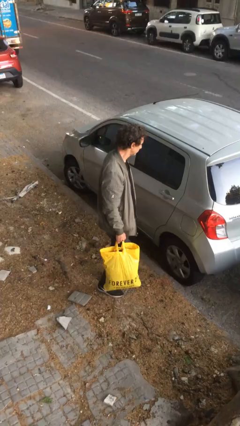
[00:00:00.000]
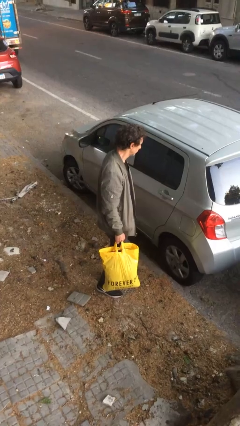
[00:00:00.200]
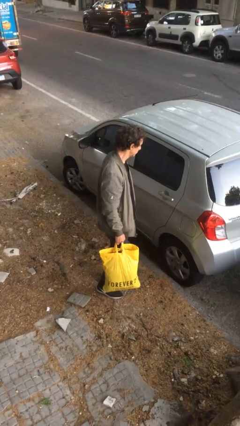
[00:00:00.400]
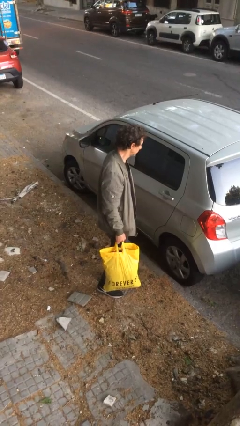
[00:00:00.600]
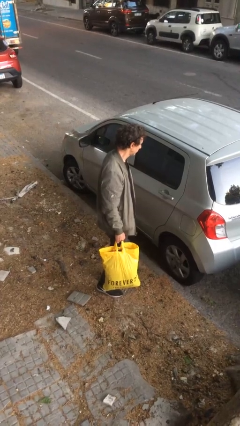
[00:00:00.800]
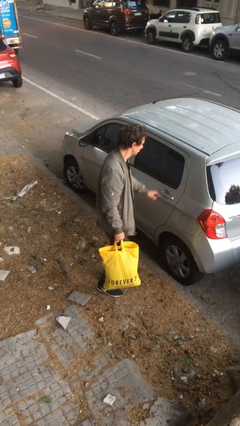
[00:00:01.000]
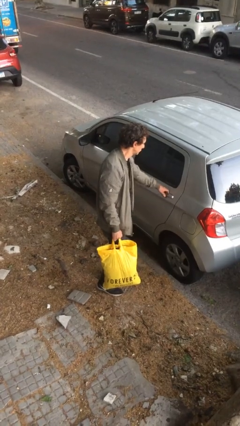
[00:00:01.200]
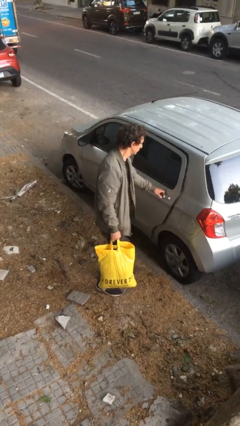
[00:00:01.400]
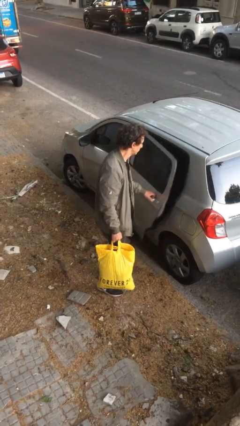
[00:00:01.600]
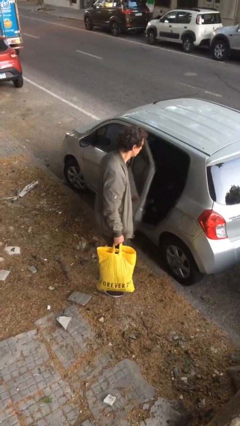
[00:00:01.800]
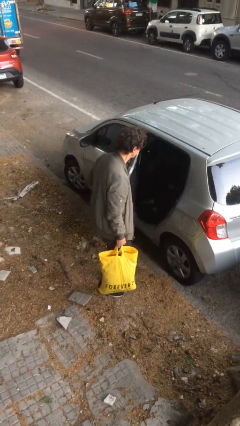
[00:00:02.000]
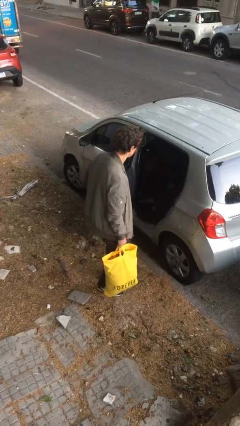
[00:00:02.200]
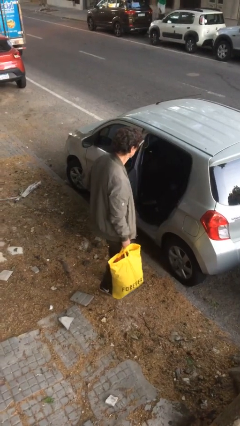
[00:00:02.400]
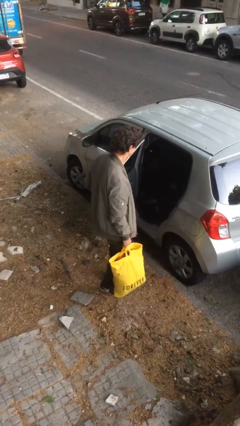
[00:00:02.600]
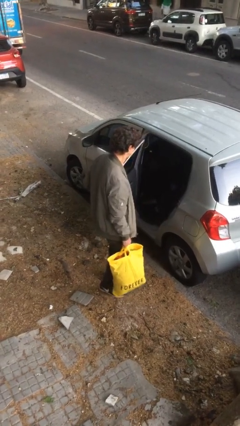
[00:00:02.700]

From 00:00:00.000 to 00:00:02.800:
person opens car door

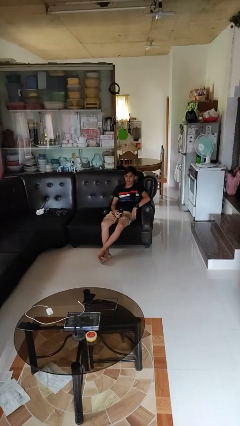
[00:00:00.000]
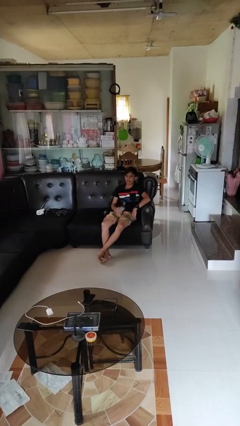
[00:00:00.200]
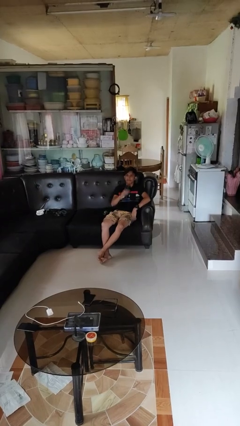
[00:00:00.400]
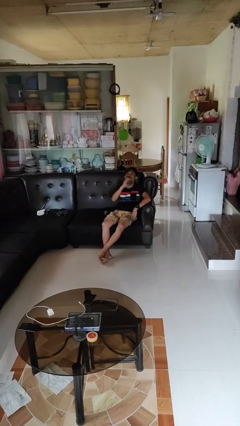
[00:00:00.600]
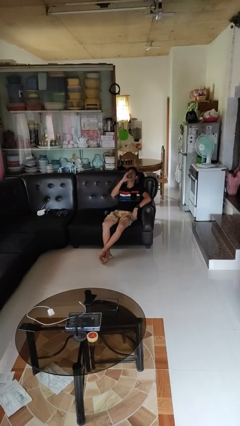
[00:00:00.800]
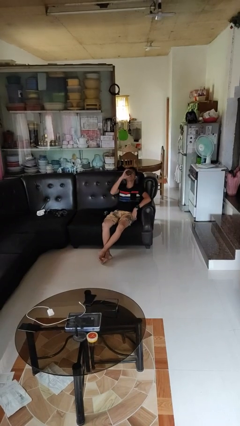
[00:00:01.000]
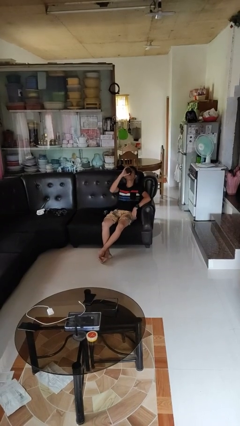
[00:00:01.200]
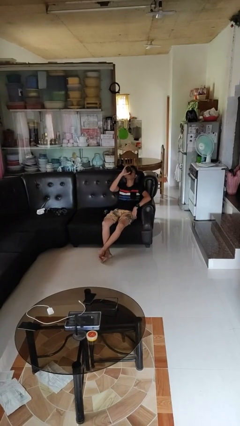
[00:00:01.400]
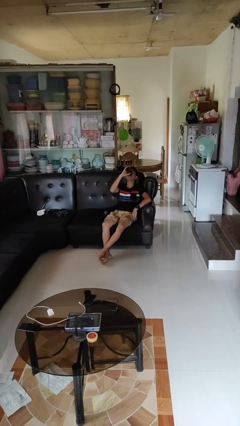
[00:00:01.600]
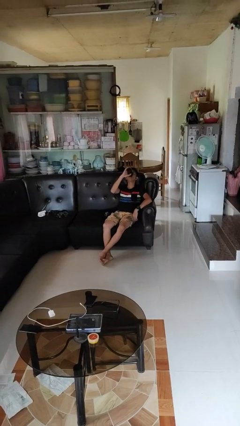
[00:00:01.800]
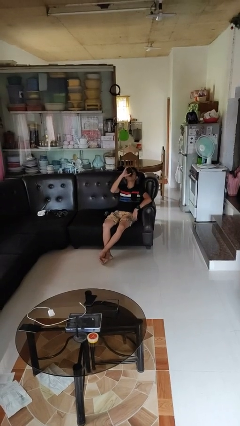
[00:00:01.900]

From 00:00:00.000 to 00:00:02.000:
person drinks from bottle

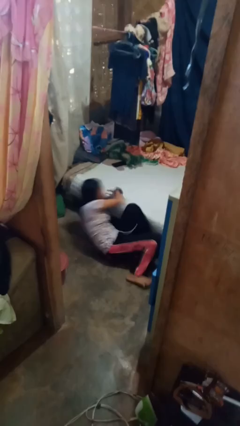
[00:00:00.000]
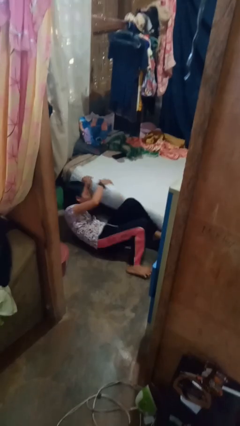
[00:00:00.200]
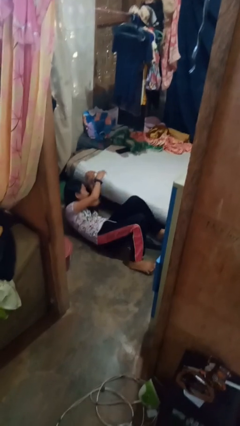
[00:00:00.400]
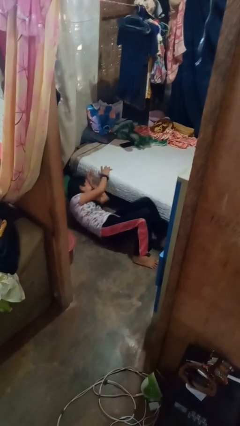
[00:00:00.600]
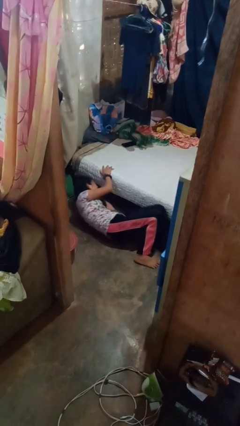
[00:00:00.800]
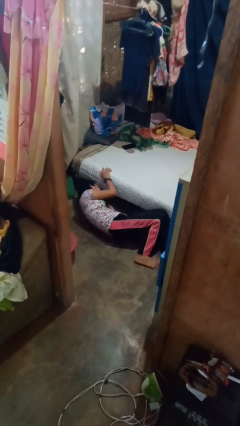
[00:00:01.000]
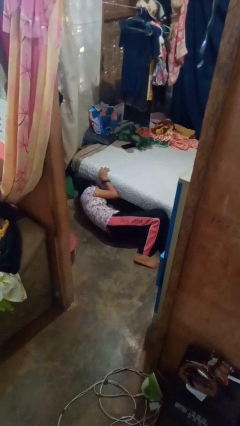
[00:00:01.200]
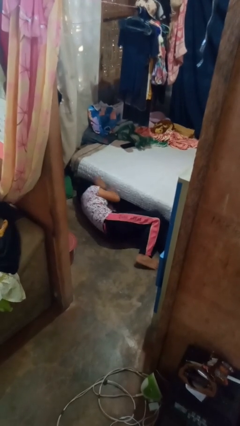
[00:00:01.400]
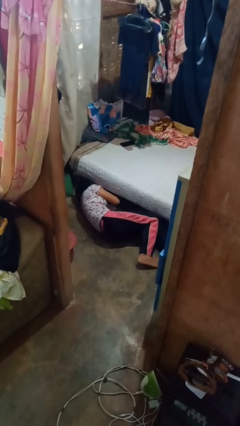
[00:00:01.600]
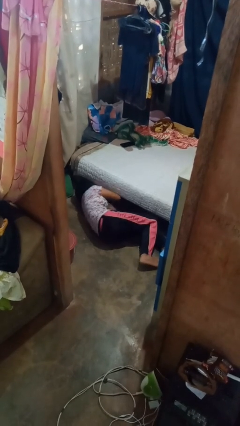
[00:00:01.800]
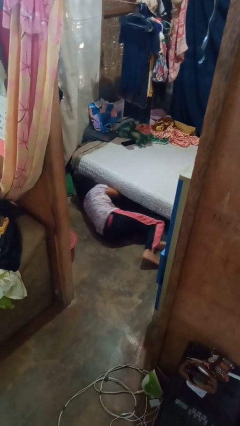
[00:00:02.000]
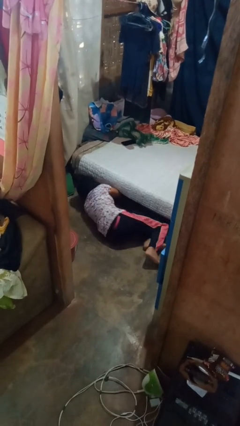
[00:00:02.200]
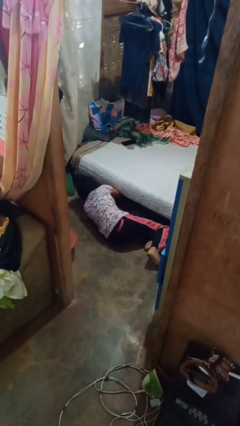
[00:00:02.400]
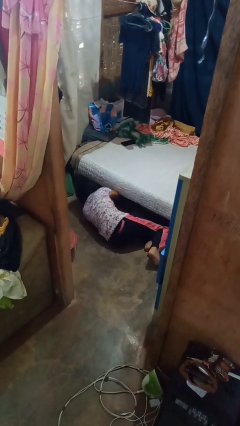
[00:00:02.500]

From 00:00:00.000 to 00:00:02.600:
person falls from bed

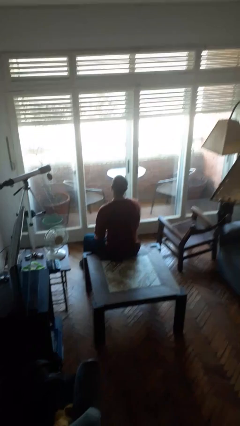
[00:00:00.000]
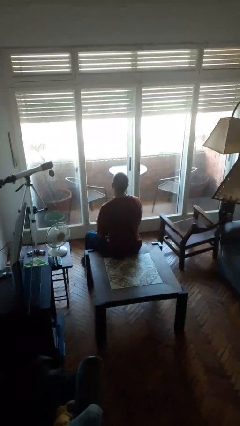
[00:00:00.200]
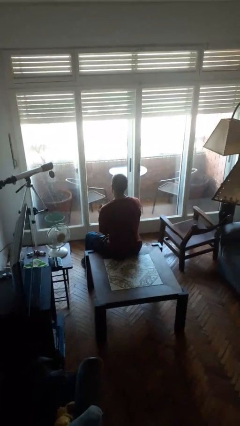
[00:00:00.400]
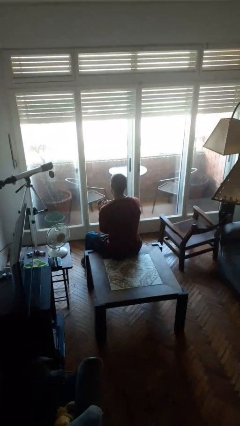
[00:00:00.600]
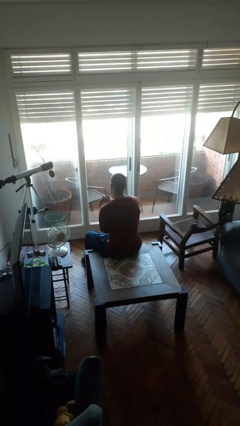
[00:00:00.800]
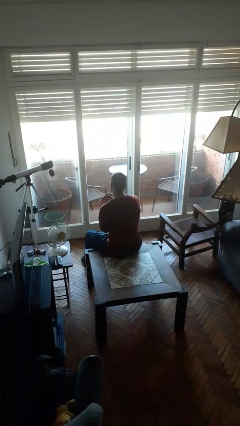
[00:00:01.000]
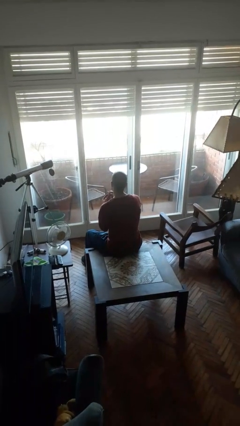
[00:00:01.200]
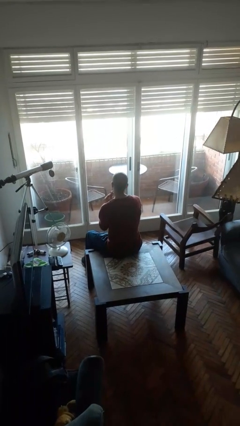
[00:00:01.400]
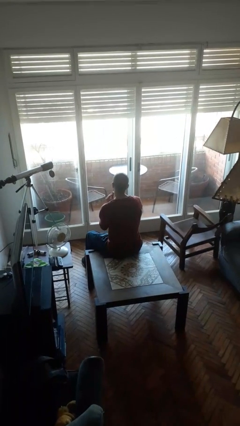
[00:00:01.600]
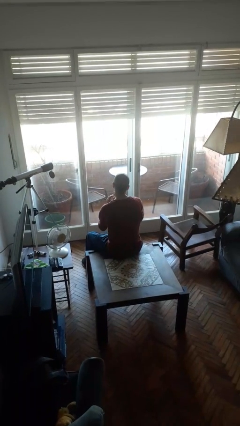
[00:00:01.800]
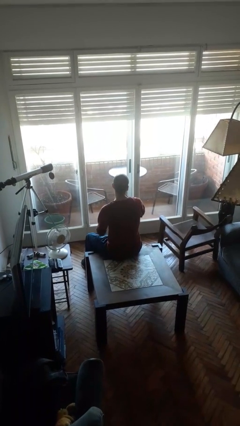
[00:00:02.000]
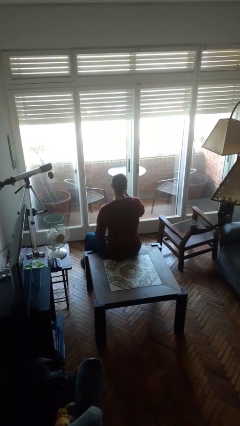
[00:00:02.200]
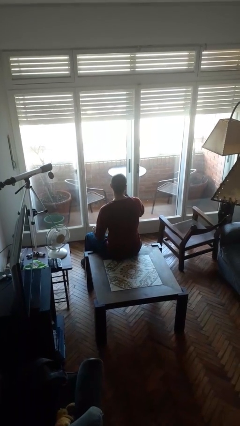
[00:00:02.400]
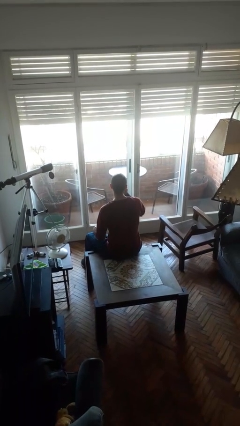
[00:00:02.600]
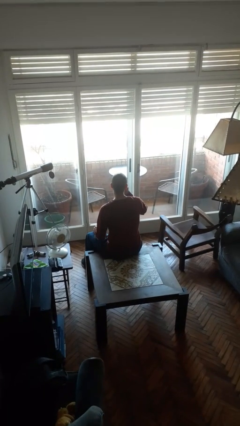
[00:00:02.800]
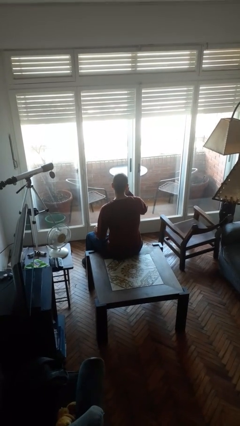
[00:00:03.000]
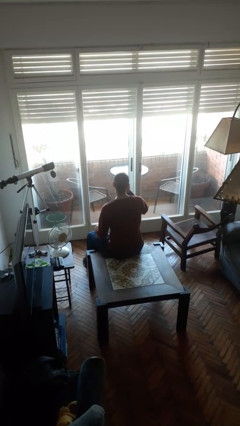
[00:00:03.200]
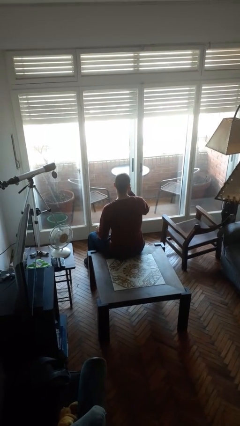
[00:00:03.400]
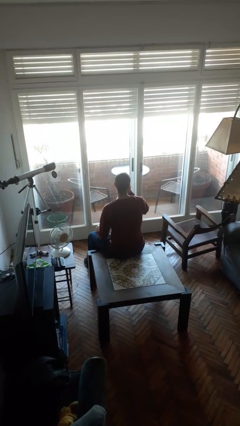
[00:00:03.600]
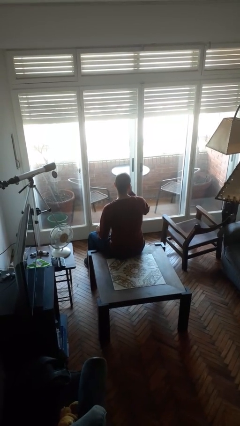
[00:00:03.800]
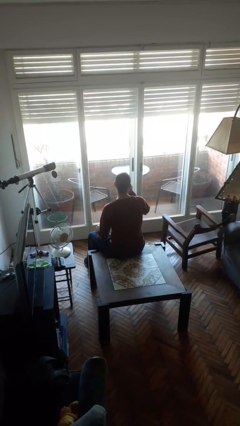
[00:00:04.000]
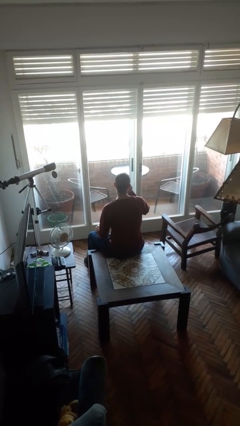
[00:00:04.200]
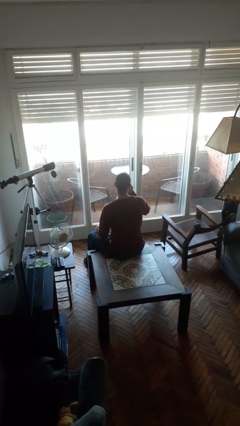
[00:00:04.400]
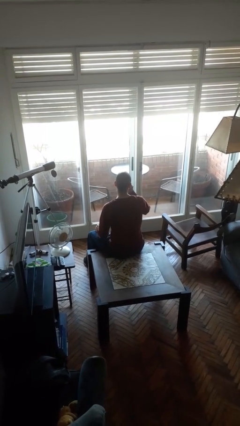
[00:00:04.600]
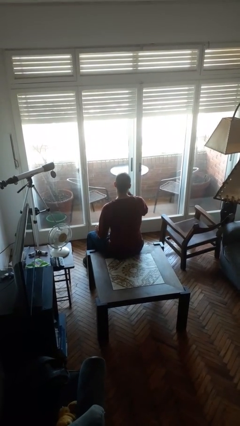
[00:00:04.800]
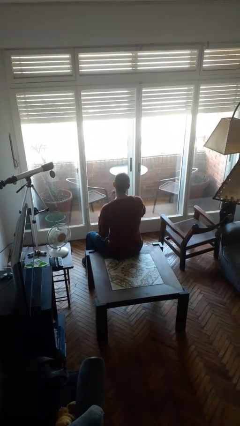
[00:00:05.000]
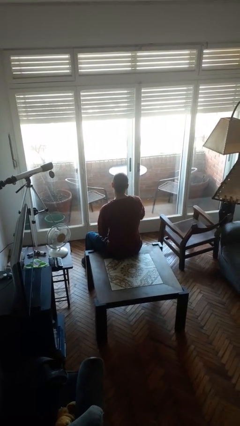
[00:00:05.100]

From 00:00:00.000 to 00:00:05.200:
person applies lip makeup

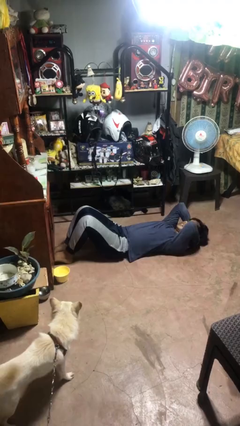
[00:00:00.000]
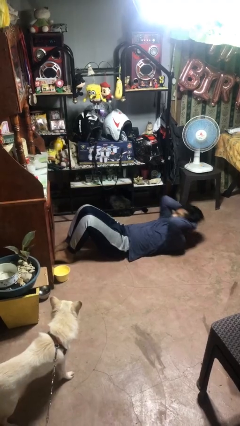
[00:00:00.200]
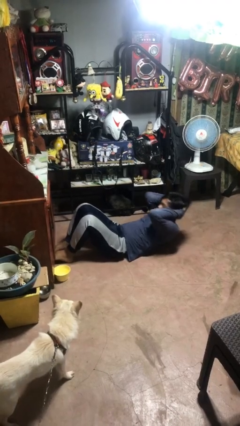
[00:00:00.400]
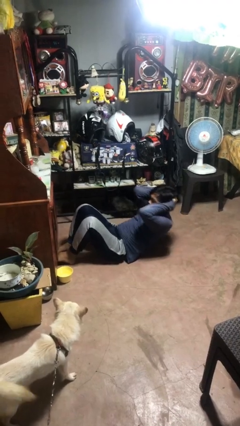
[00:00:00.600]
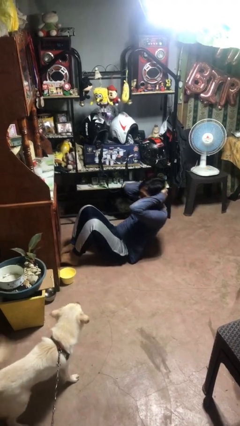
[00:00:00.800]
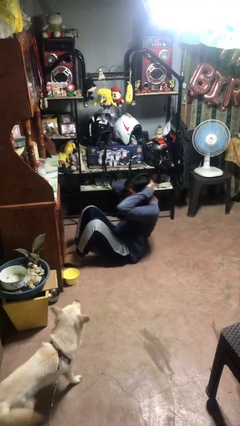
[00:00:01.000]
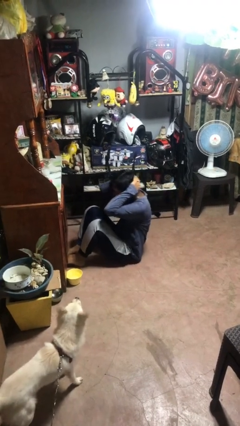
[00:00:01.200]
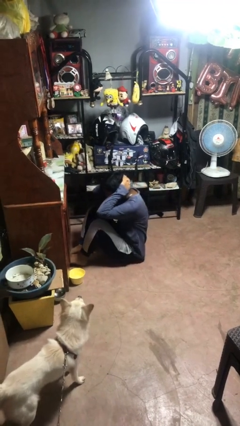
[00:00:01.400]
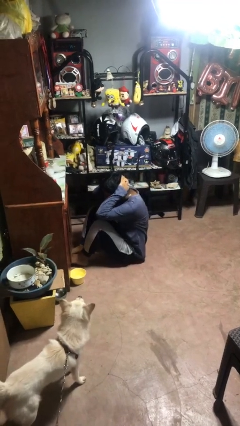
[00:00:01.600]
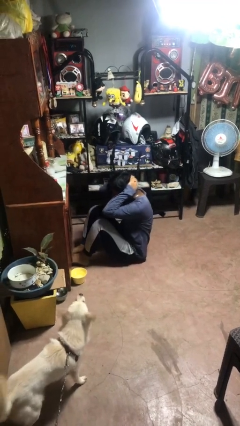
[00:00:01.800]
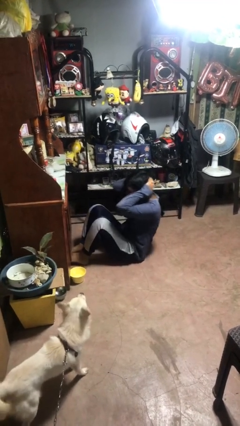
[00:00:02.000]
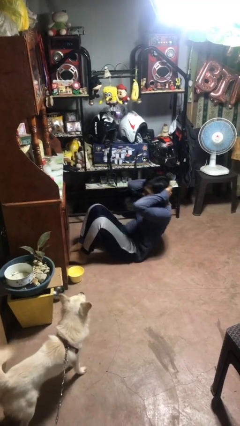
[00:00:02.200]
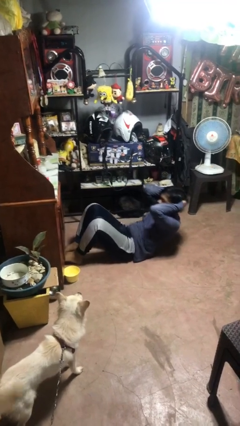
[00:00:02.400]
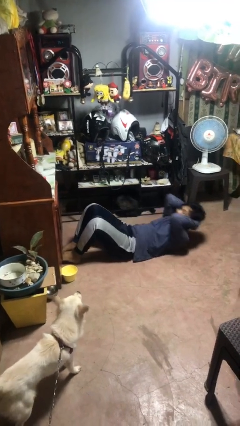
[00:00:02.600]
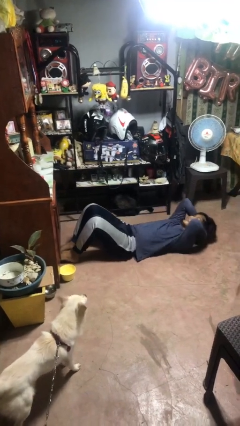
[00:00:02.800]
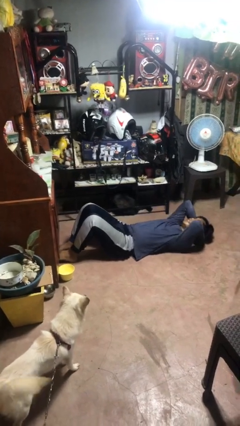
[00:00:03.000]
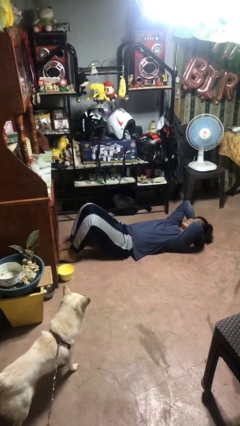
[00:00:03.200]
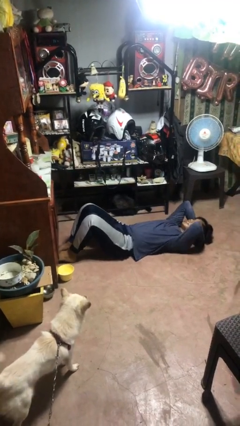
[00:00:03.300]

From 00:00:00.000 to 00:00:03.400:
person exercises with situp

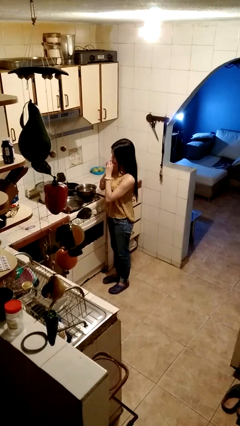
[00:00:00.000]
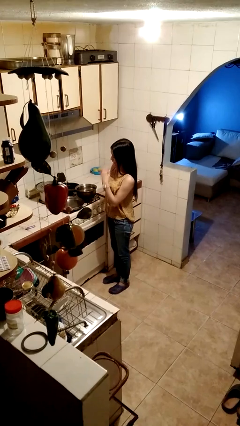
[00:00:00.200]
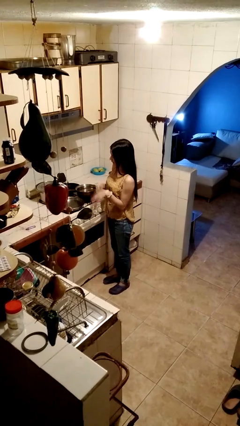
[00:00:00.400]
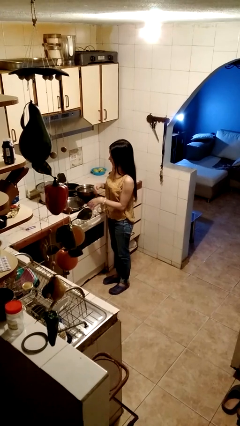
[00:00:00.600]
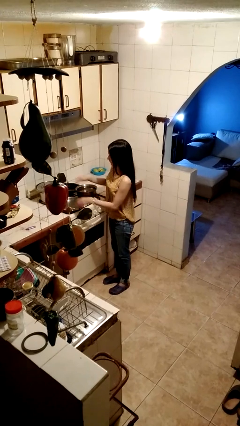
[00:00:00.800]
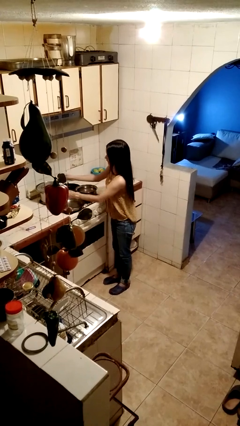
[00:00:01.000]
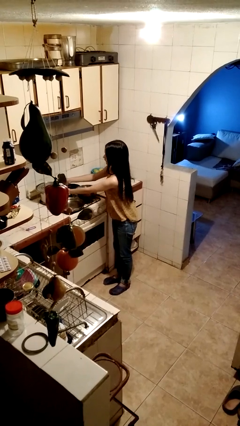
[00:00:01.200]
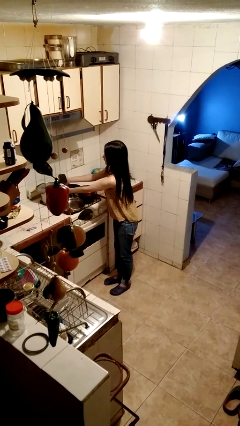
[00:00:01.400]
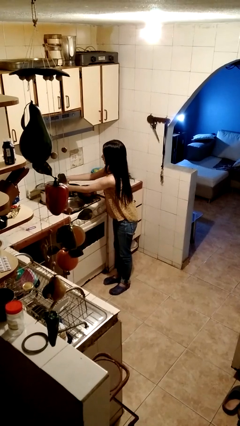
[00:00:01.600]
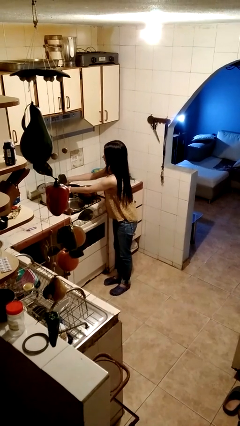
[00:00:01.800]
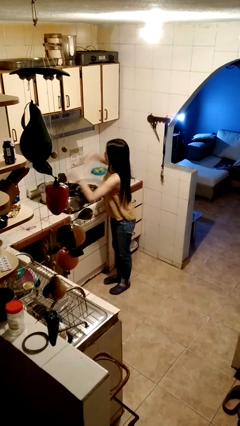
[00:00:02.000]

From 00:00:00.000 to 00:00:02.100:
person burns hand
